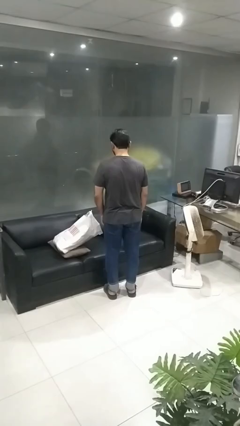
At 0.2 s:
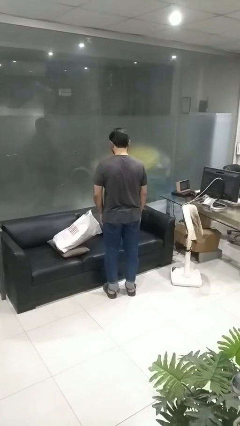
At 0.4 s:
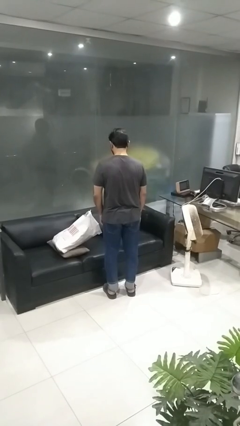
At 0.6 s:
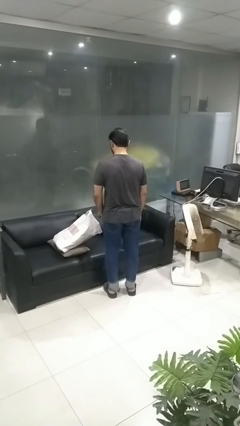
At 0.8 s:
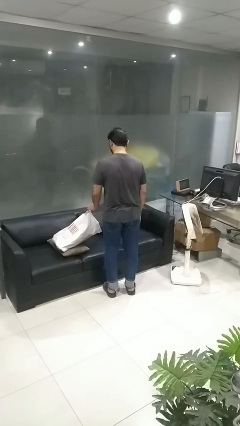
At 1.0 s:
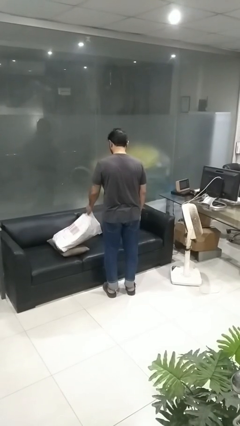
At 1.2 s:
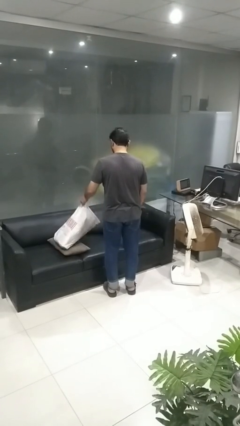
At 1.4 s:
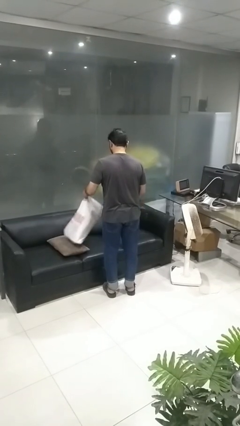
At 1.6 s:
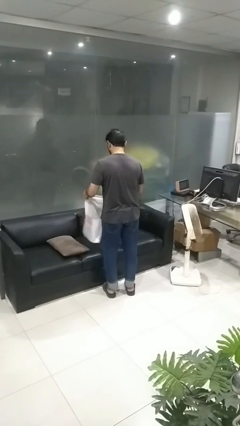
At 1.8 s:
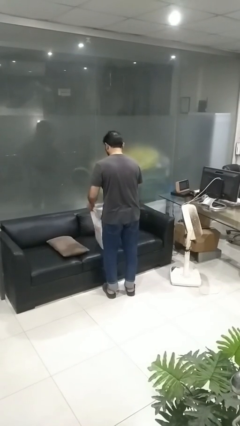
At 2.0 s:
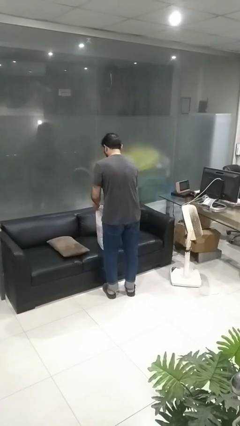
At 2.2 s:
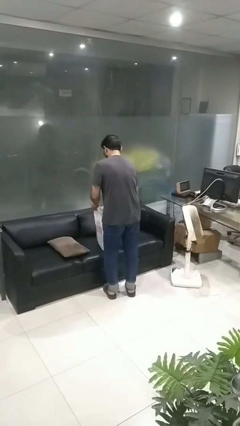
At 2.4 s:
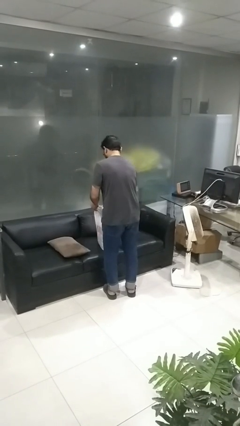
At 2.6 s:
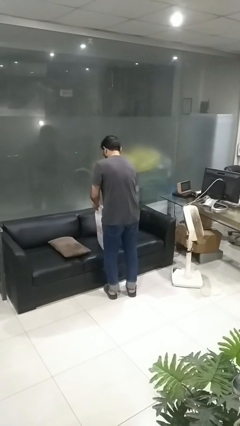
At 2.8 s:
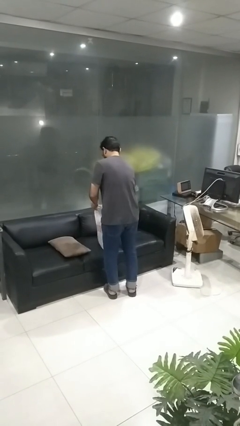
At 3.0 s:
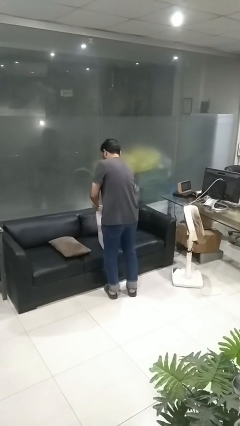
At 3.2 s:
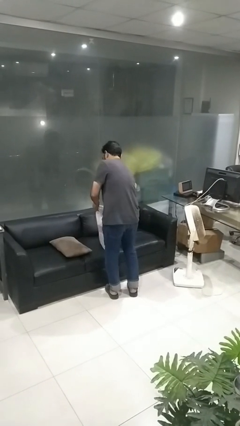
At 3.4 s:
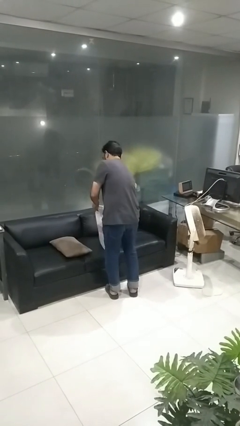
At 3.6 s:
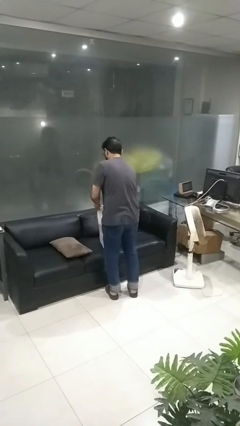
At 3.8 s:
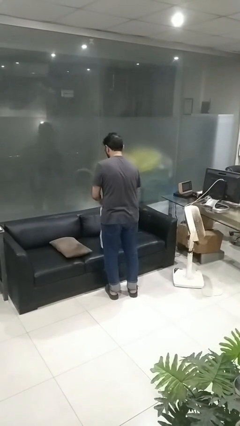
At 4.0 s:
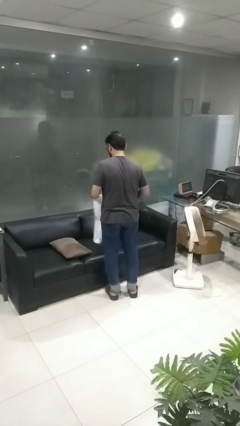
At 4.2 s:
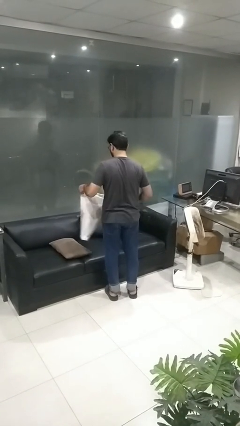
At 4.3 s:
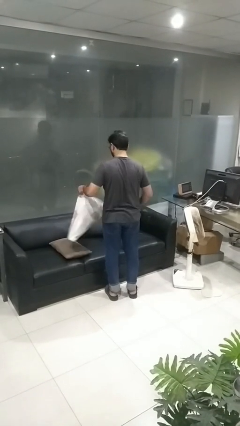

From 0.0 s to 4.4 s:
person searches in bag

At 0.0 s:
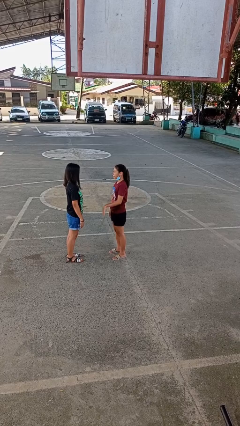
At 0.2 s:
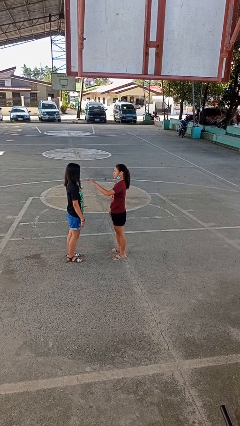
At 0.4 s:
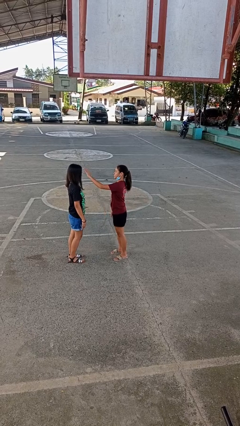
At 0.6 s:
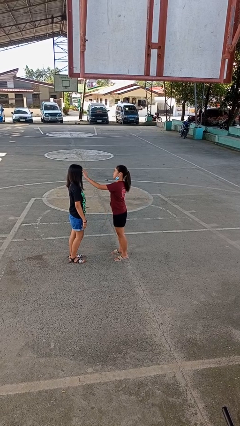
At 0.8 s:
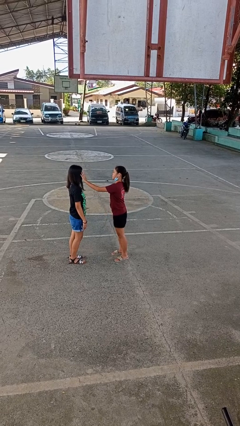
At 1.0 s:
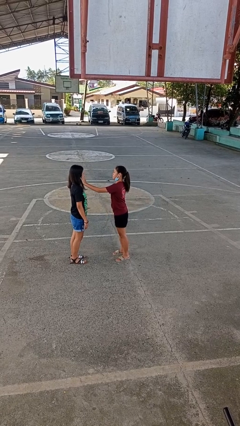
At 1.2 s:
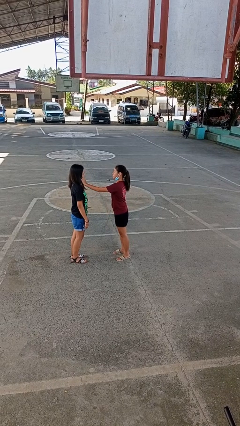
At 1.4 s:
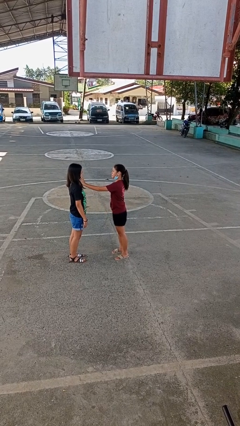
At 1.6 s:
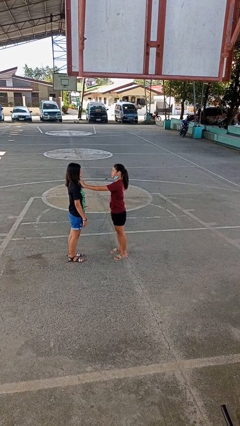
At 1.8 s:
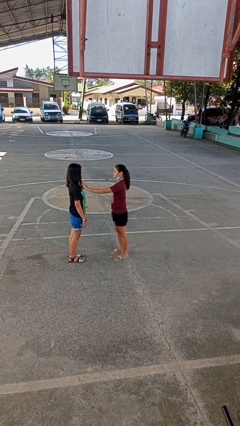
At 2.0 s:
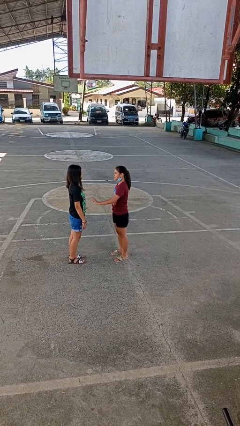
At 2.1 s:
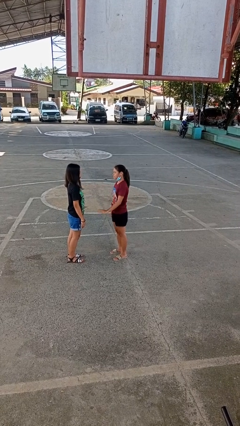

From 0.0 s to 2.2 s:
person touches face of person

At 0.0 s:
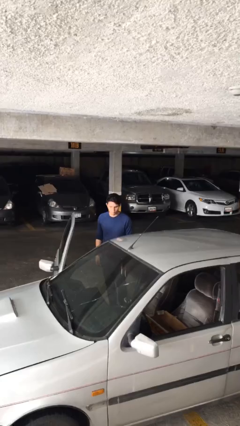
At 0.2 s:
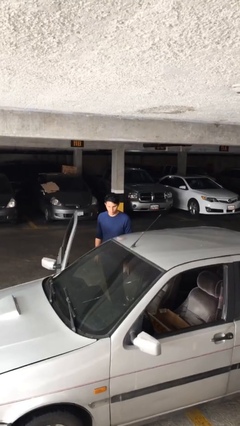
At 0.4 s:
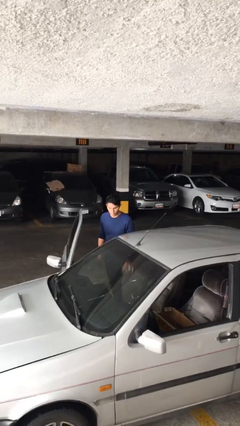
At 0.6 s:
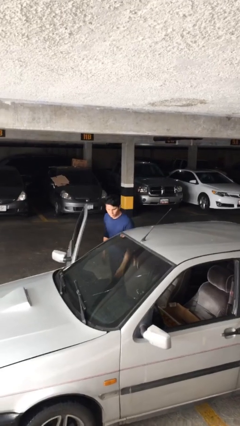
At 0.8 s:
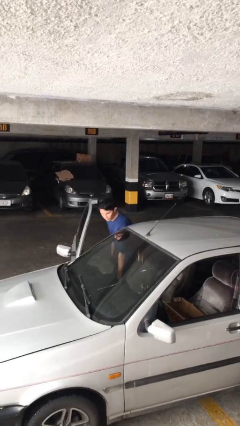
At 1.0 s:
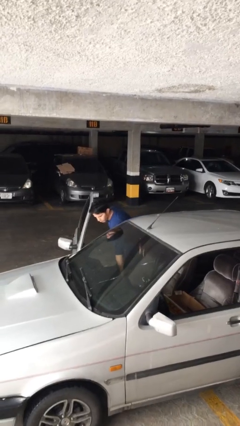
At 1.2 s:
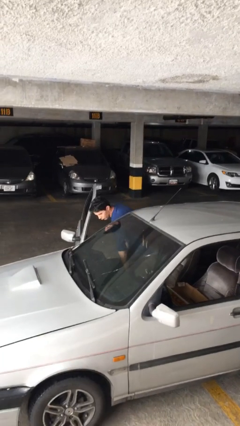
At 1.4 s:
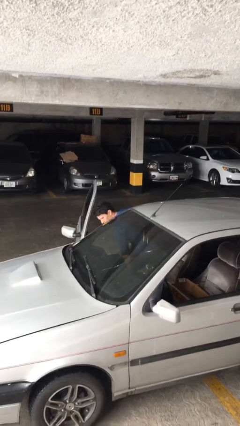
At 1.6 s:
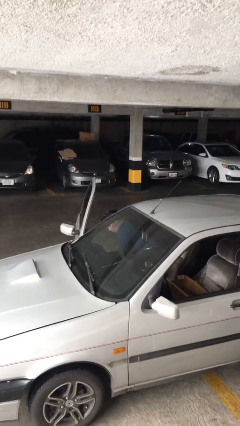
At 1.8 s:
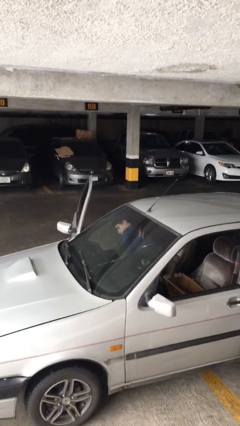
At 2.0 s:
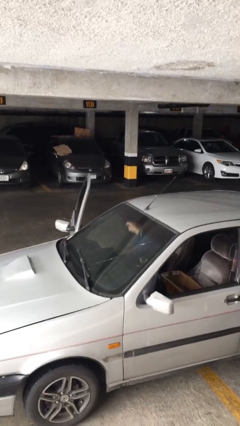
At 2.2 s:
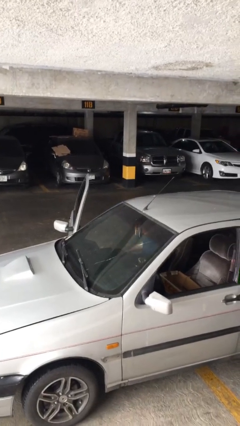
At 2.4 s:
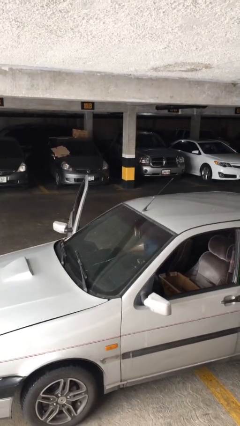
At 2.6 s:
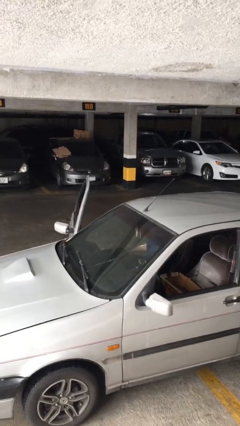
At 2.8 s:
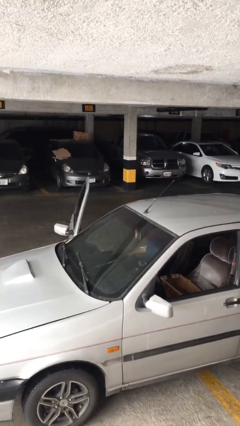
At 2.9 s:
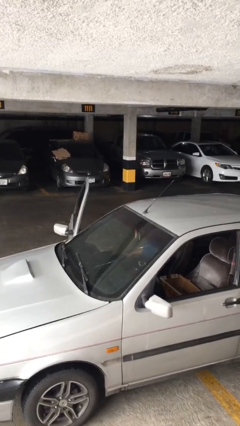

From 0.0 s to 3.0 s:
person enters car

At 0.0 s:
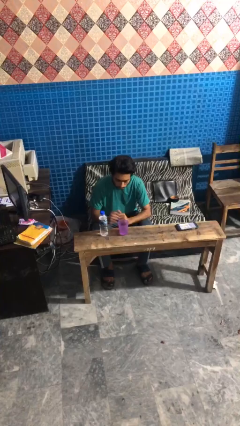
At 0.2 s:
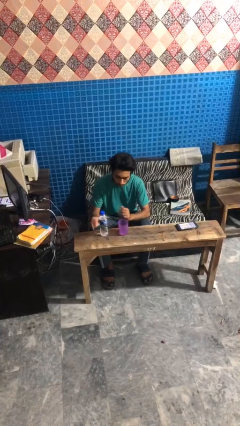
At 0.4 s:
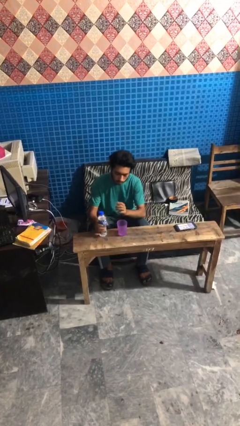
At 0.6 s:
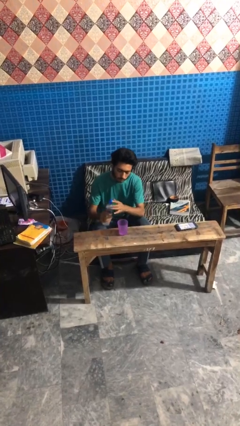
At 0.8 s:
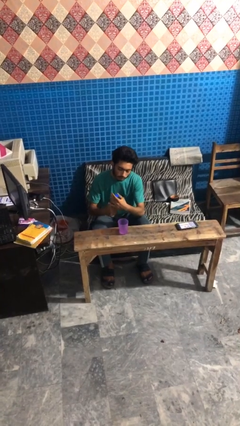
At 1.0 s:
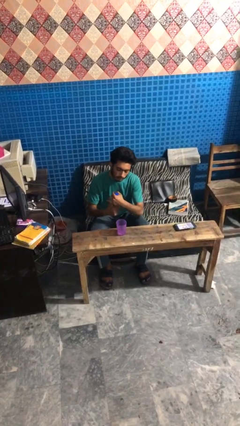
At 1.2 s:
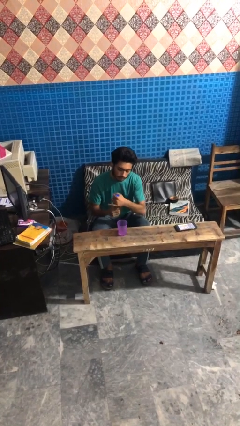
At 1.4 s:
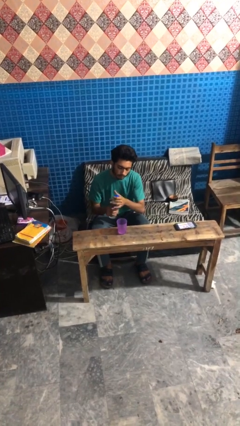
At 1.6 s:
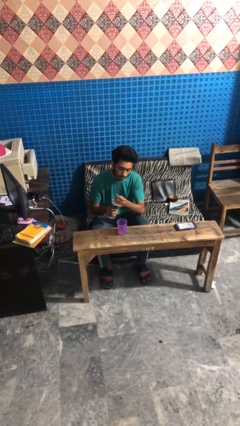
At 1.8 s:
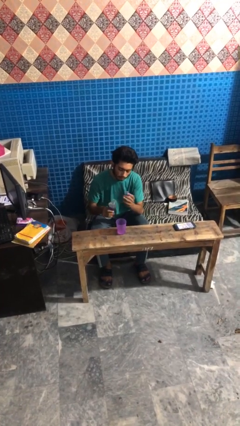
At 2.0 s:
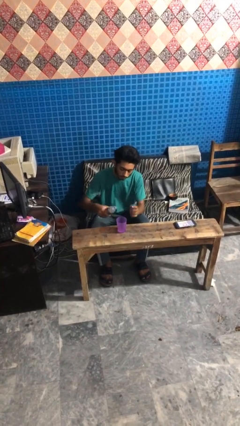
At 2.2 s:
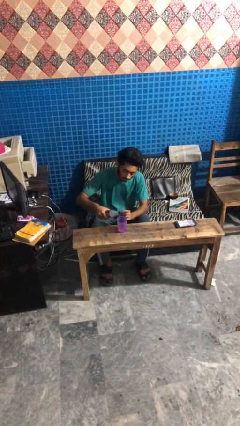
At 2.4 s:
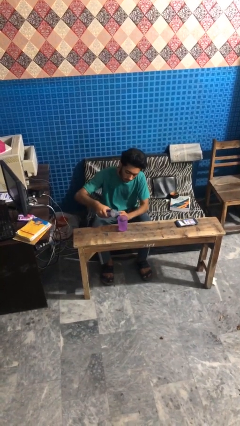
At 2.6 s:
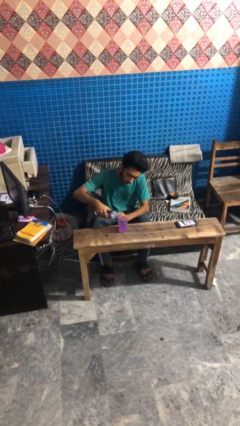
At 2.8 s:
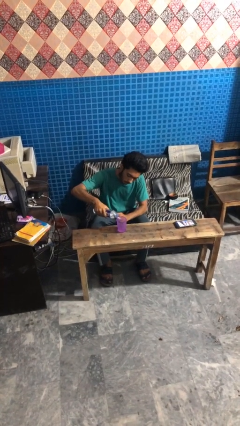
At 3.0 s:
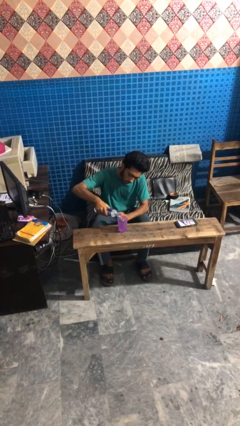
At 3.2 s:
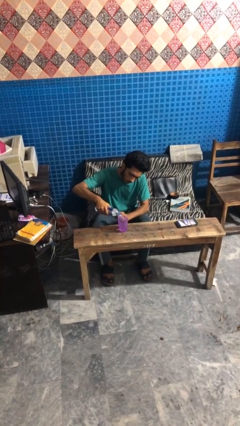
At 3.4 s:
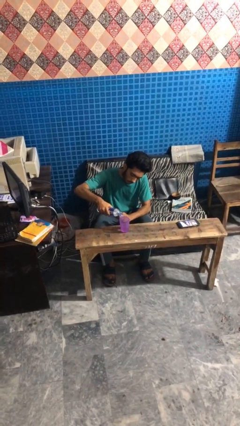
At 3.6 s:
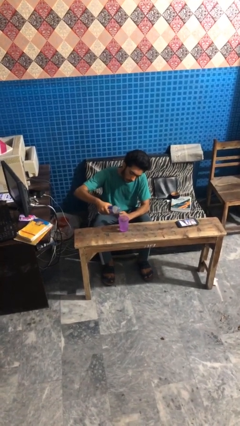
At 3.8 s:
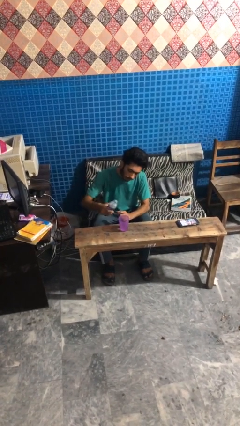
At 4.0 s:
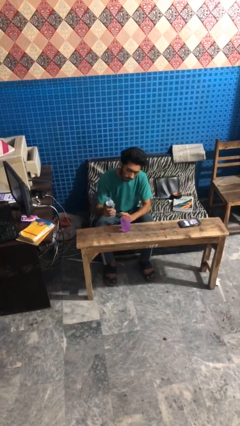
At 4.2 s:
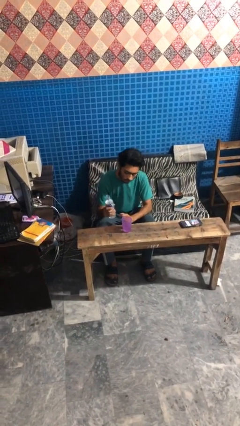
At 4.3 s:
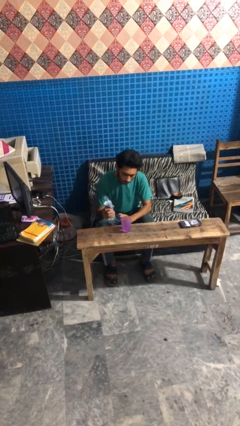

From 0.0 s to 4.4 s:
person pours liquid into cup

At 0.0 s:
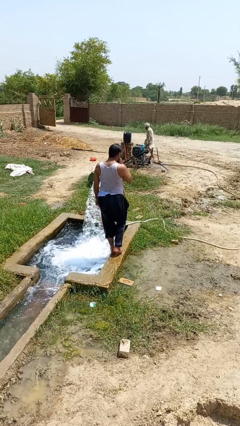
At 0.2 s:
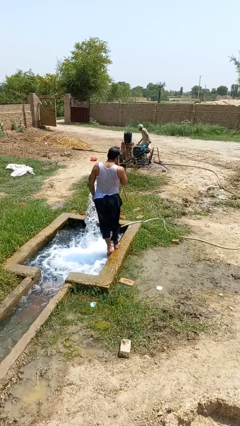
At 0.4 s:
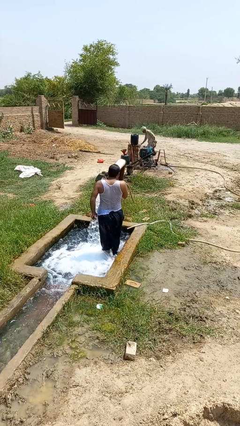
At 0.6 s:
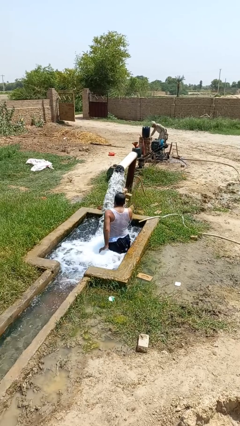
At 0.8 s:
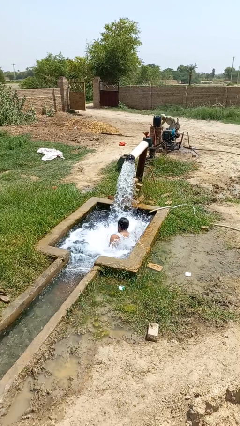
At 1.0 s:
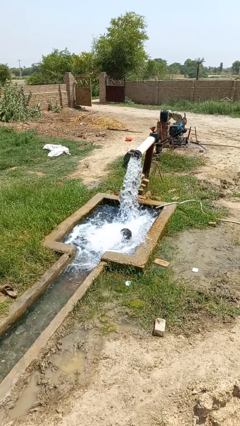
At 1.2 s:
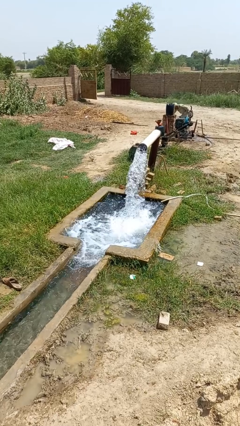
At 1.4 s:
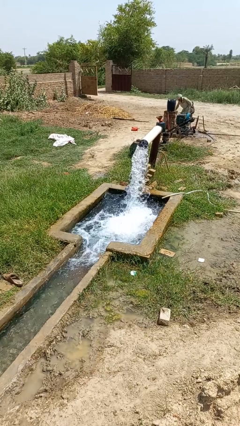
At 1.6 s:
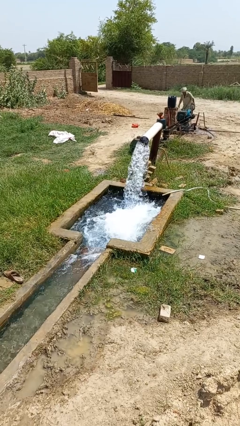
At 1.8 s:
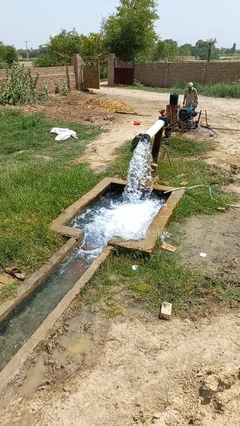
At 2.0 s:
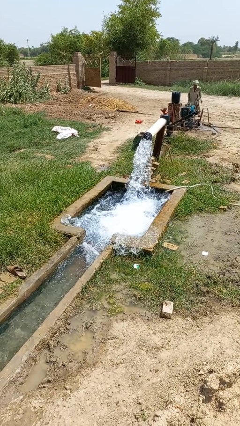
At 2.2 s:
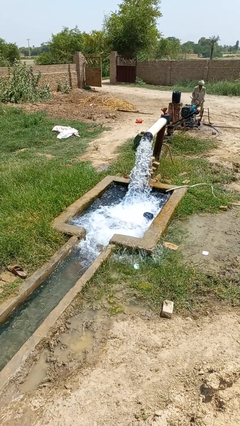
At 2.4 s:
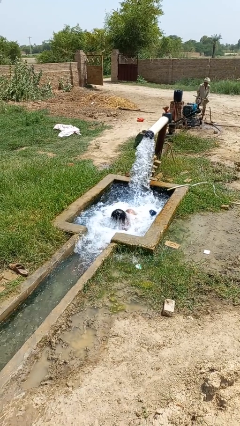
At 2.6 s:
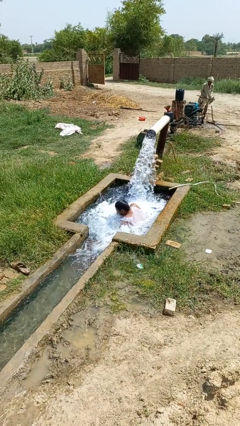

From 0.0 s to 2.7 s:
person falls into pool

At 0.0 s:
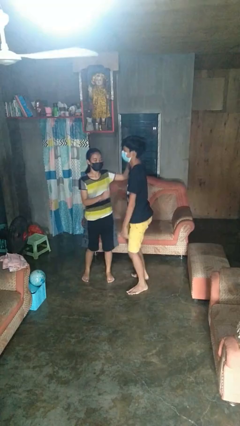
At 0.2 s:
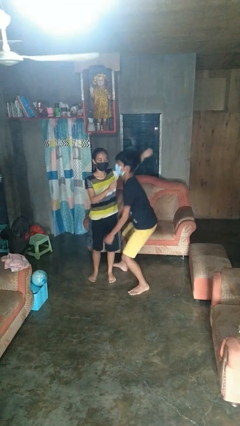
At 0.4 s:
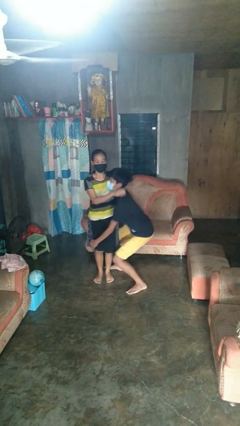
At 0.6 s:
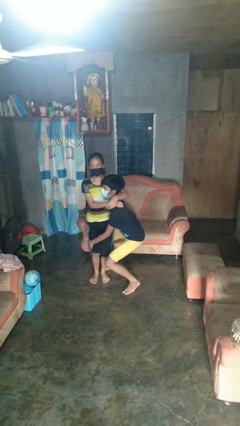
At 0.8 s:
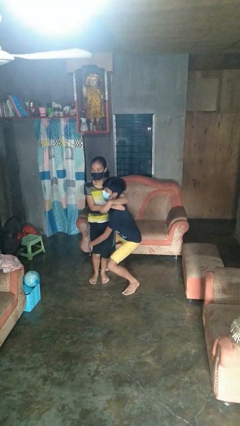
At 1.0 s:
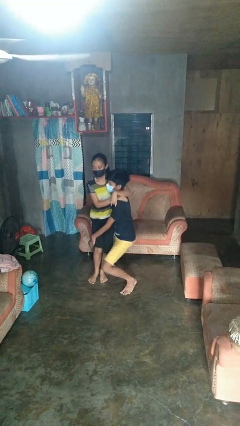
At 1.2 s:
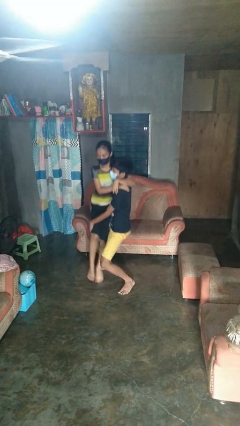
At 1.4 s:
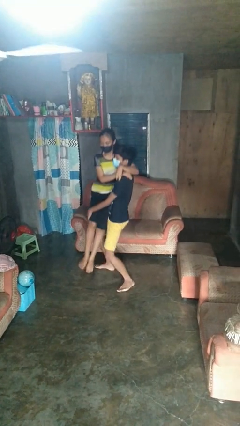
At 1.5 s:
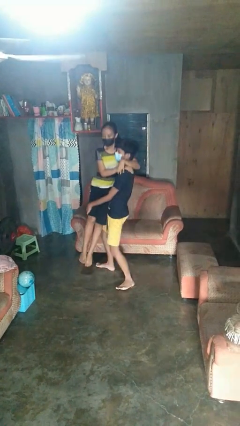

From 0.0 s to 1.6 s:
person picks up person
